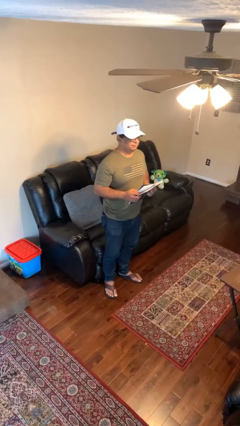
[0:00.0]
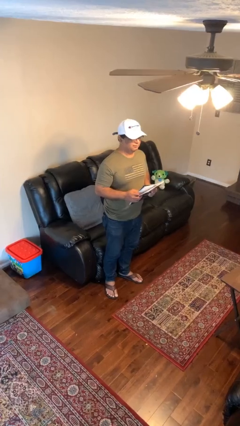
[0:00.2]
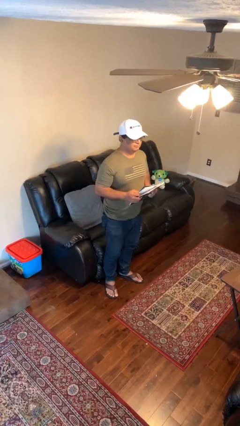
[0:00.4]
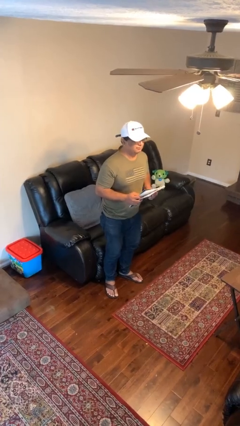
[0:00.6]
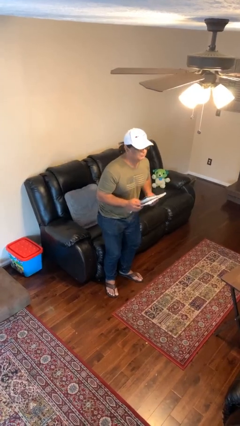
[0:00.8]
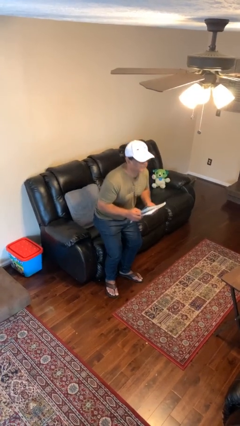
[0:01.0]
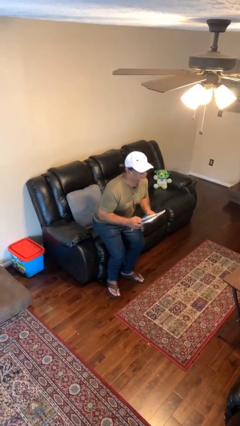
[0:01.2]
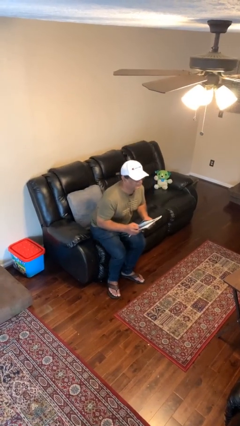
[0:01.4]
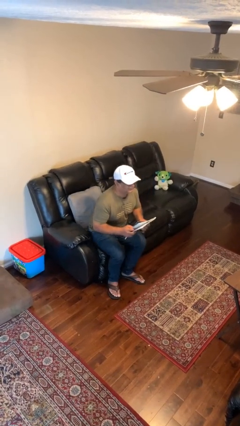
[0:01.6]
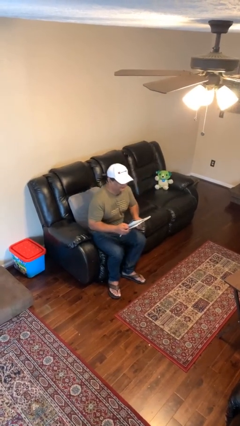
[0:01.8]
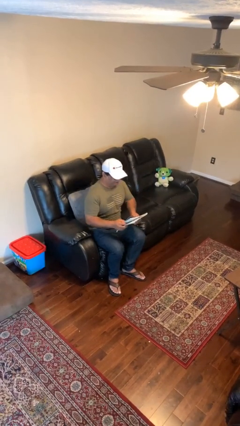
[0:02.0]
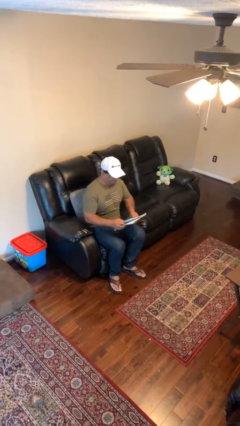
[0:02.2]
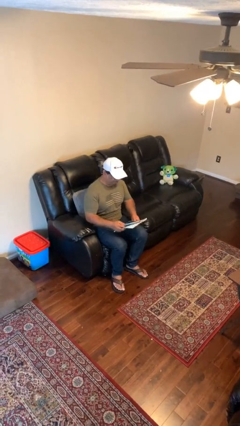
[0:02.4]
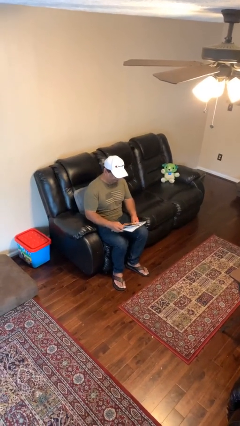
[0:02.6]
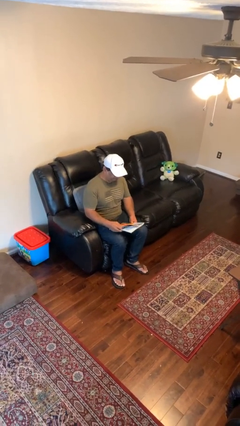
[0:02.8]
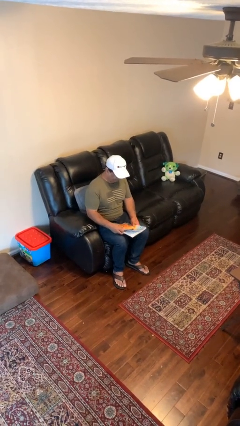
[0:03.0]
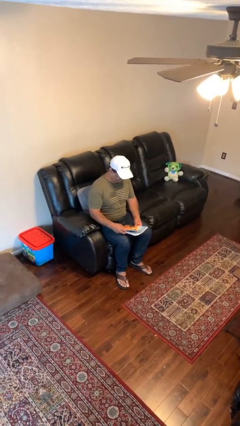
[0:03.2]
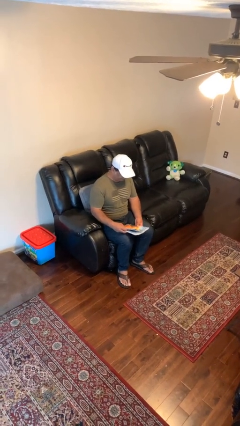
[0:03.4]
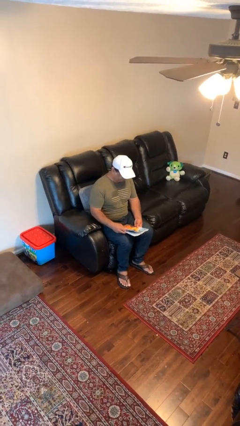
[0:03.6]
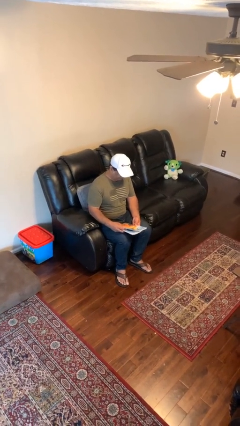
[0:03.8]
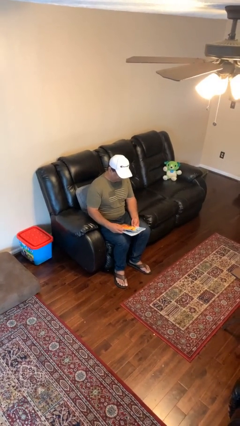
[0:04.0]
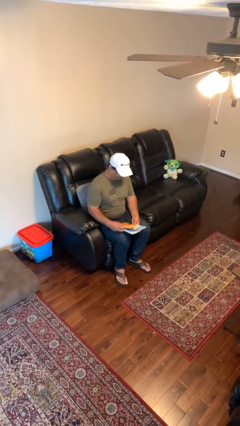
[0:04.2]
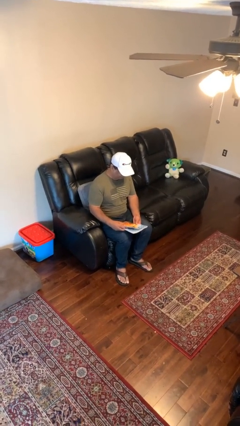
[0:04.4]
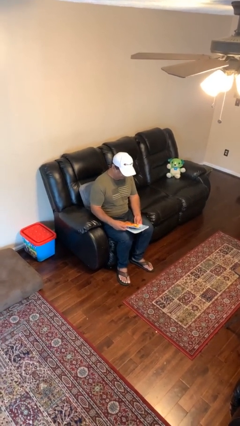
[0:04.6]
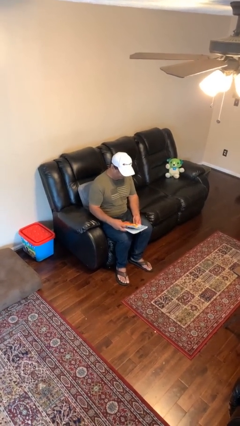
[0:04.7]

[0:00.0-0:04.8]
person sits down

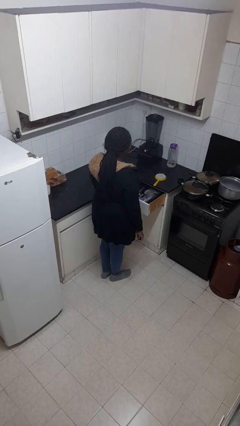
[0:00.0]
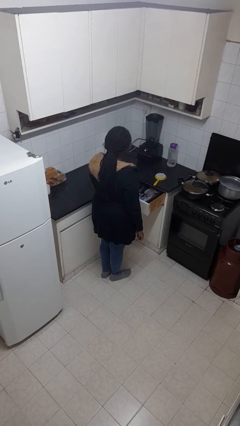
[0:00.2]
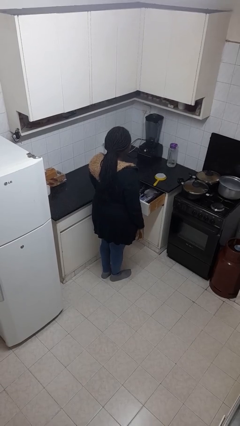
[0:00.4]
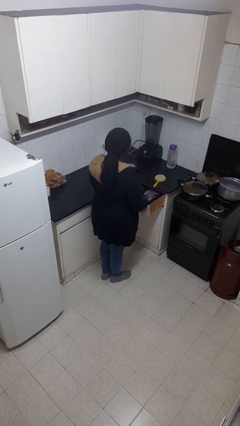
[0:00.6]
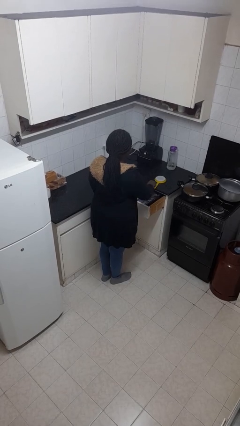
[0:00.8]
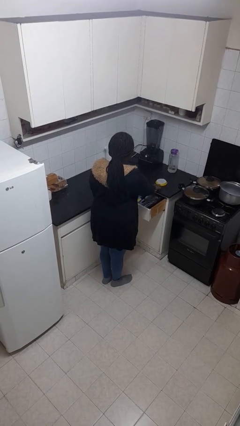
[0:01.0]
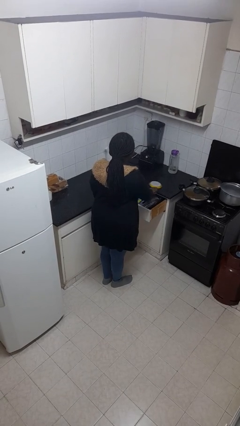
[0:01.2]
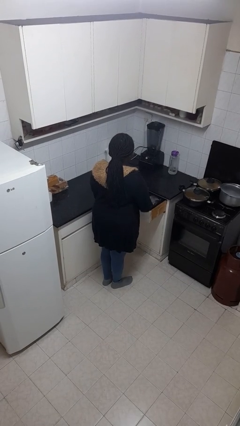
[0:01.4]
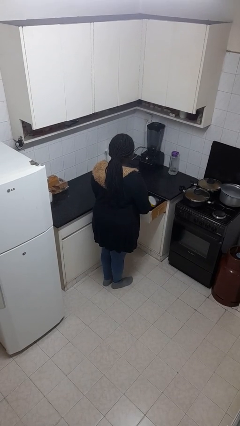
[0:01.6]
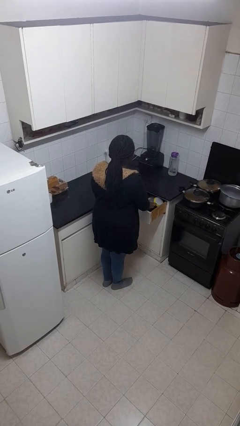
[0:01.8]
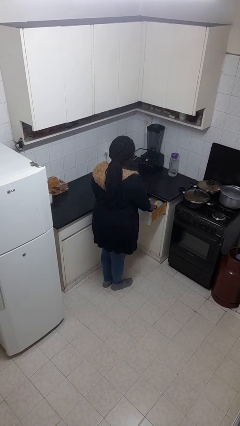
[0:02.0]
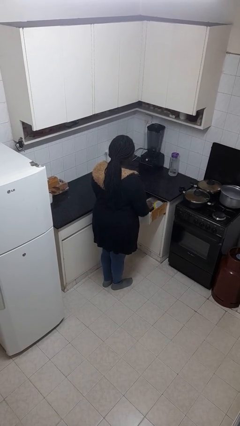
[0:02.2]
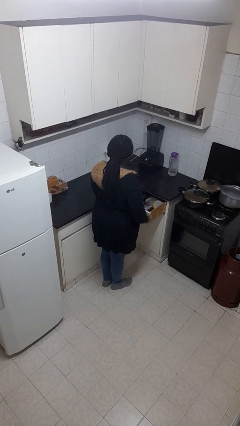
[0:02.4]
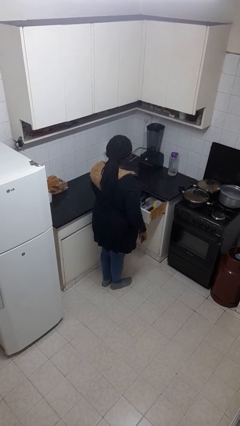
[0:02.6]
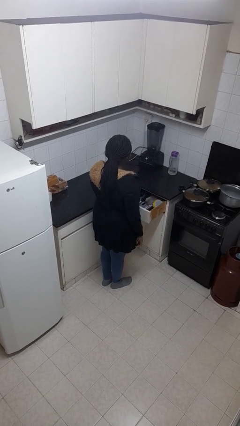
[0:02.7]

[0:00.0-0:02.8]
person puts object into kitchen drawer

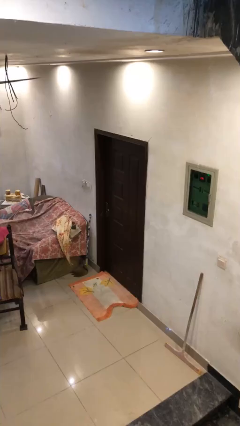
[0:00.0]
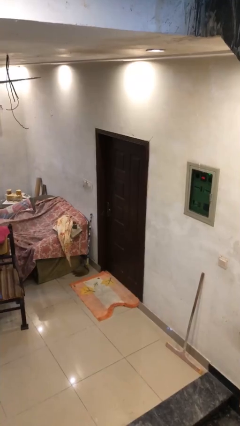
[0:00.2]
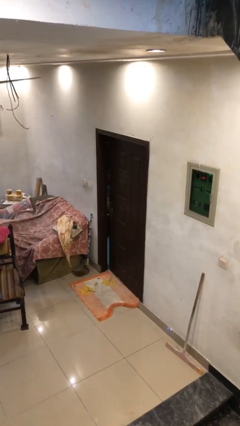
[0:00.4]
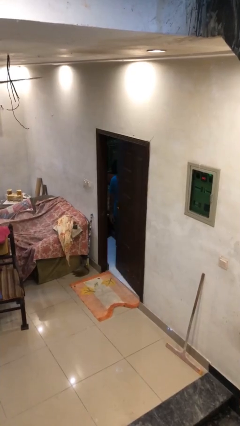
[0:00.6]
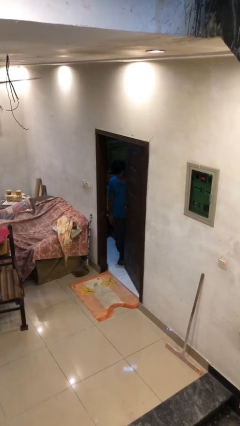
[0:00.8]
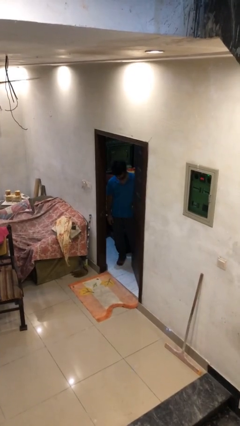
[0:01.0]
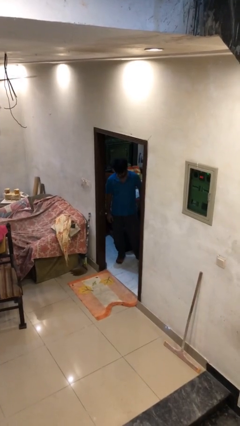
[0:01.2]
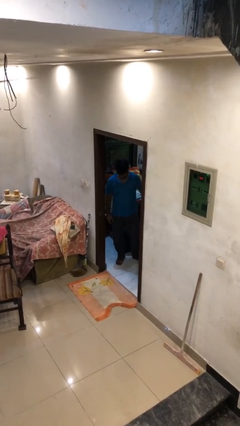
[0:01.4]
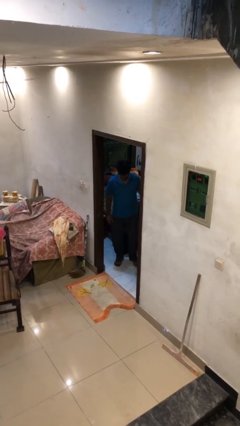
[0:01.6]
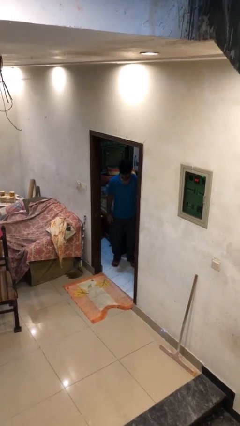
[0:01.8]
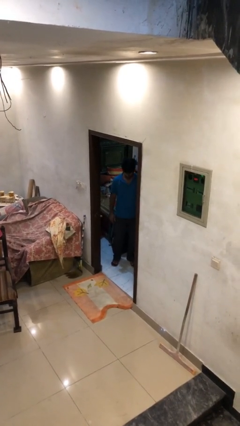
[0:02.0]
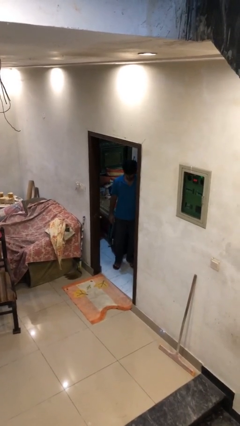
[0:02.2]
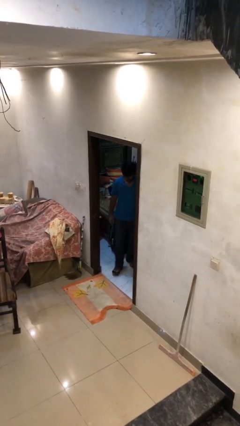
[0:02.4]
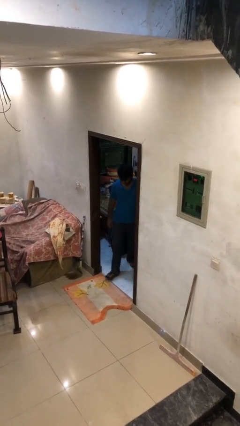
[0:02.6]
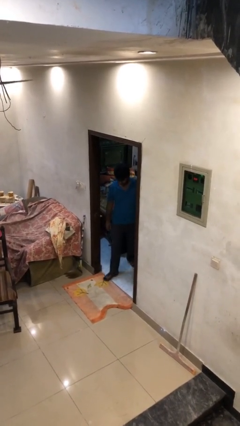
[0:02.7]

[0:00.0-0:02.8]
person opens facility door

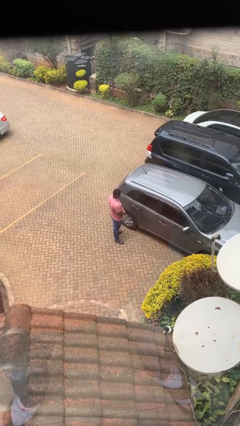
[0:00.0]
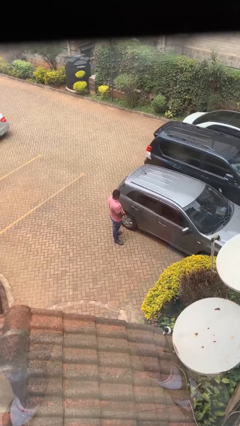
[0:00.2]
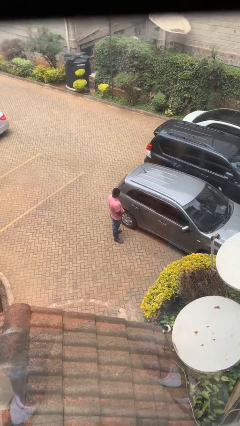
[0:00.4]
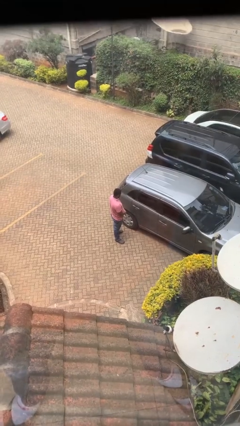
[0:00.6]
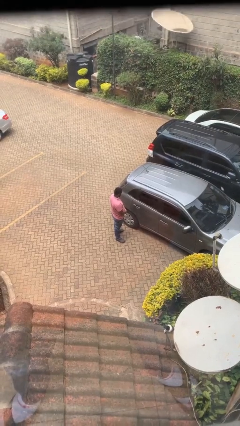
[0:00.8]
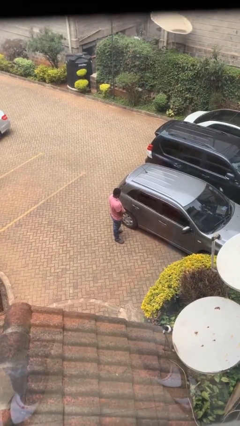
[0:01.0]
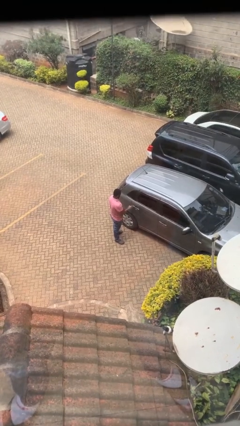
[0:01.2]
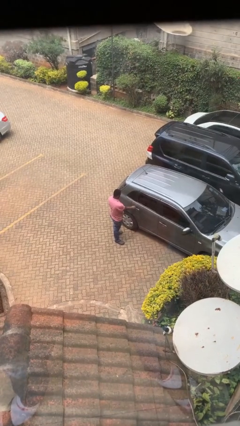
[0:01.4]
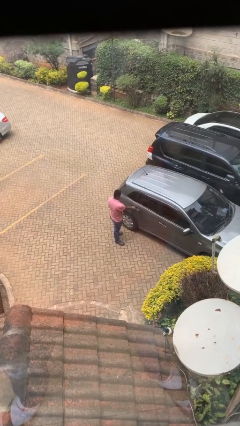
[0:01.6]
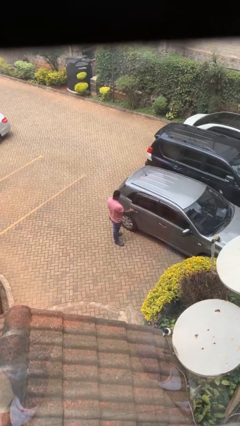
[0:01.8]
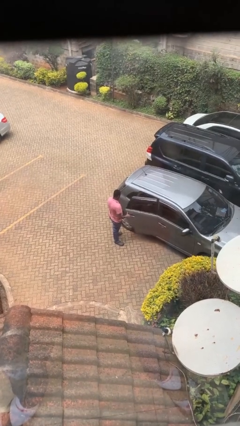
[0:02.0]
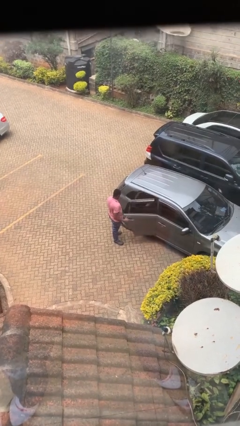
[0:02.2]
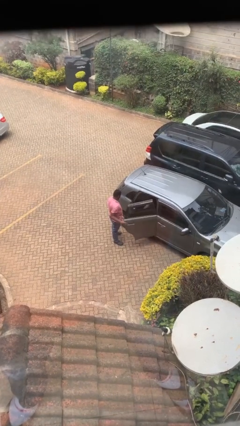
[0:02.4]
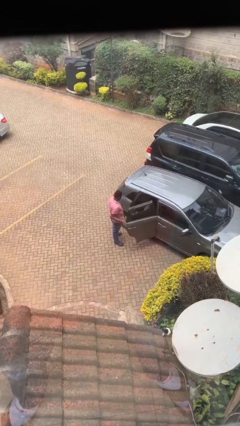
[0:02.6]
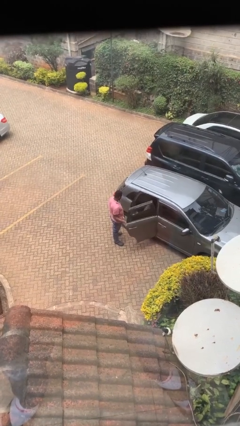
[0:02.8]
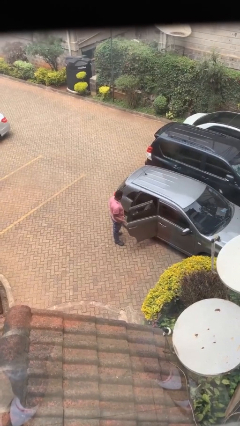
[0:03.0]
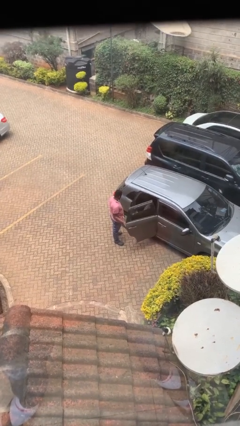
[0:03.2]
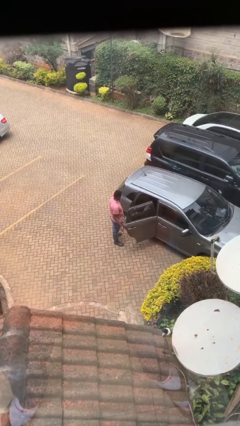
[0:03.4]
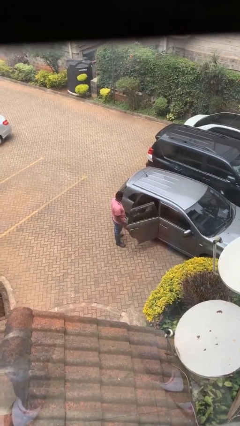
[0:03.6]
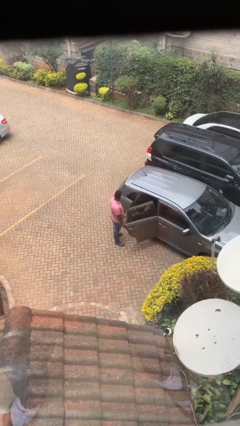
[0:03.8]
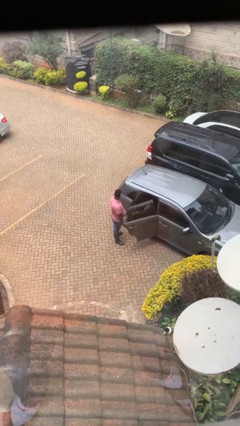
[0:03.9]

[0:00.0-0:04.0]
person opens car door

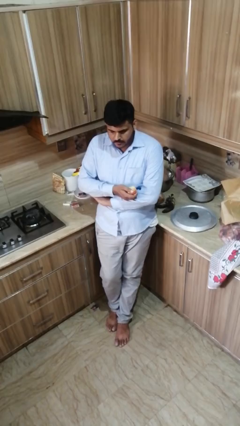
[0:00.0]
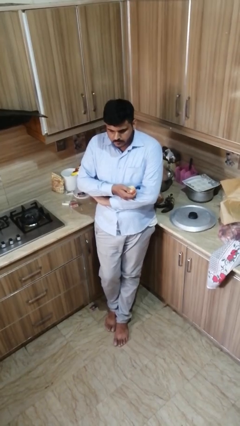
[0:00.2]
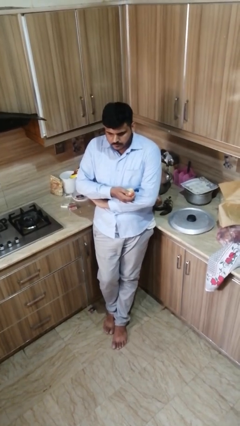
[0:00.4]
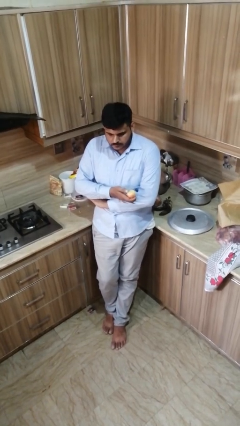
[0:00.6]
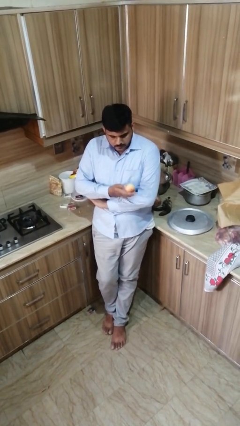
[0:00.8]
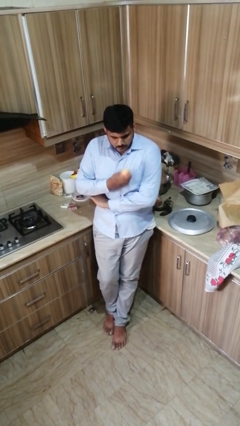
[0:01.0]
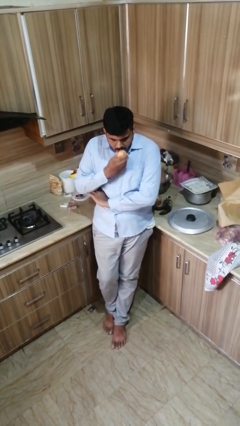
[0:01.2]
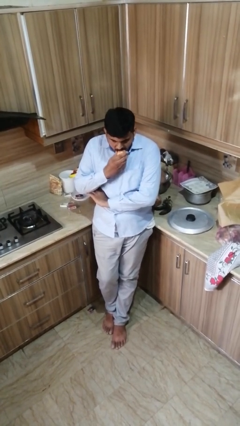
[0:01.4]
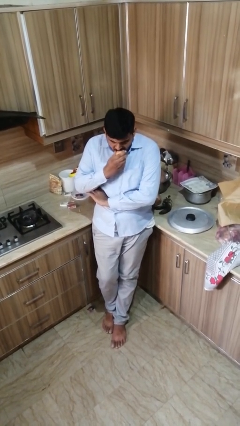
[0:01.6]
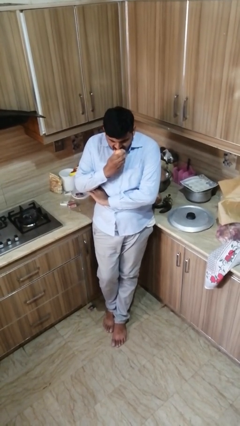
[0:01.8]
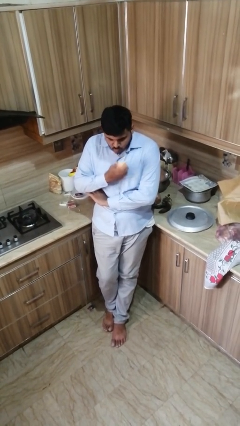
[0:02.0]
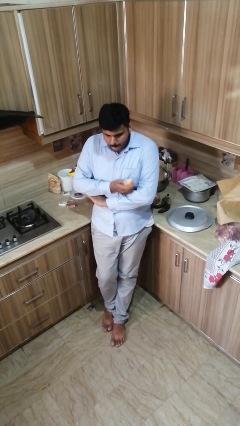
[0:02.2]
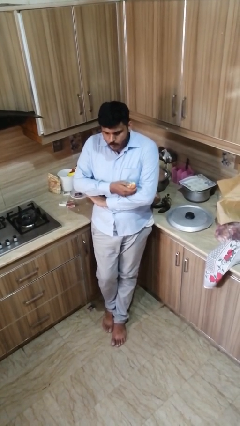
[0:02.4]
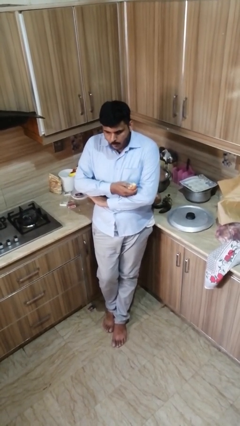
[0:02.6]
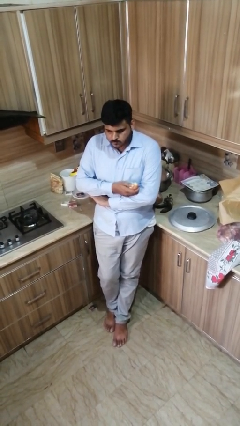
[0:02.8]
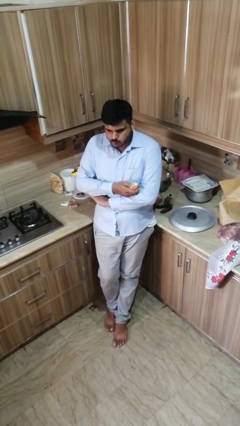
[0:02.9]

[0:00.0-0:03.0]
person eats apple
